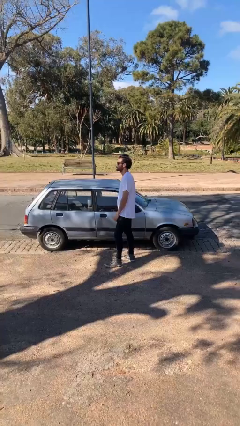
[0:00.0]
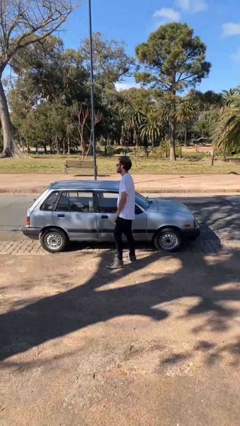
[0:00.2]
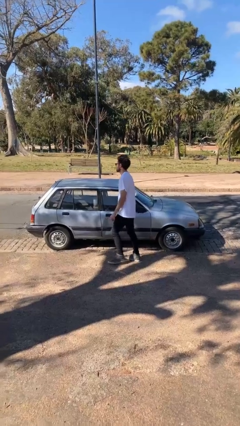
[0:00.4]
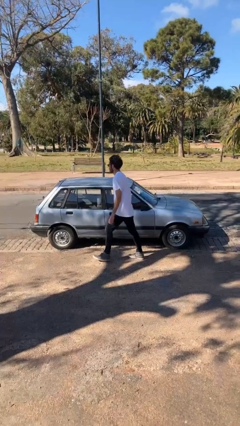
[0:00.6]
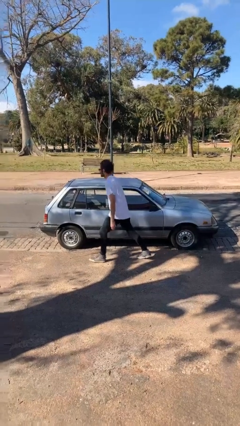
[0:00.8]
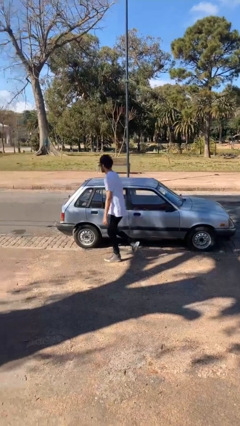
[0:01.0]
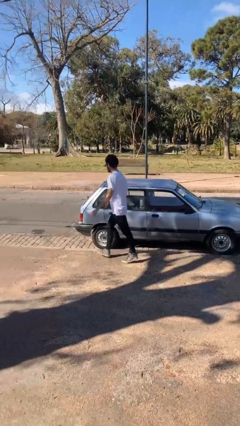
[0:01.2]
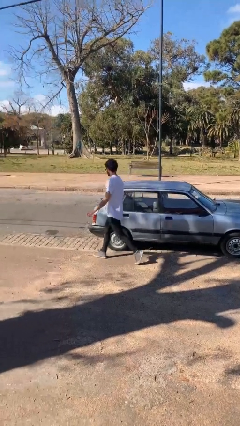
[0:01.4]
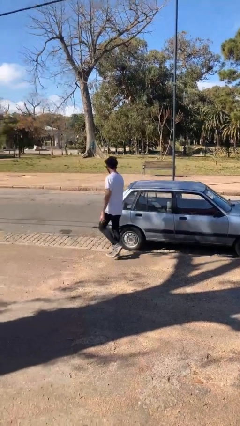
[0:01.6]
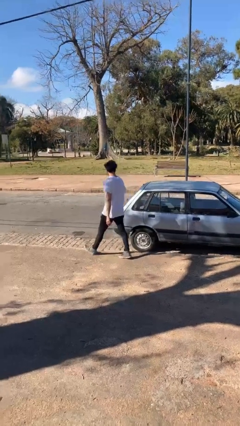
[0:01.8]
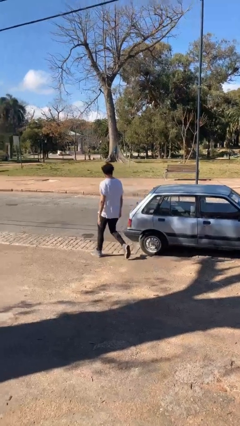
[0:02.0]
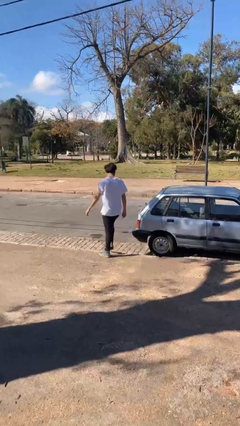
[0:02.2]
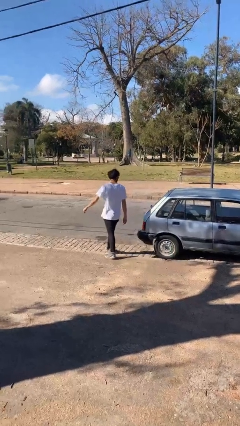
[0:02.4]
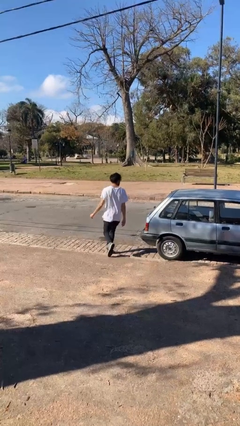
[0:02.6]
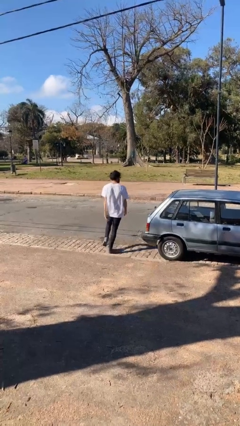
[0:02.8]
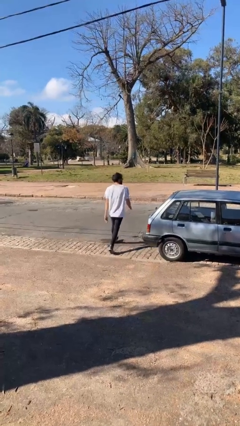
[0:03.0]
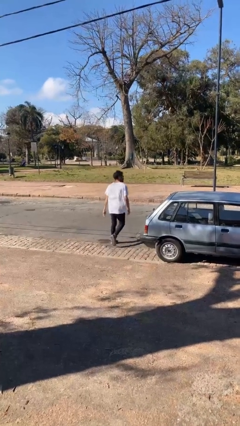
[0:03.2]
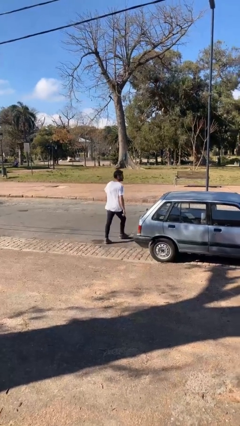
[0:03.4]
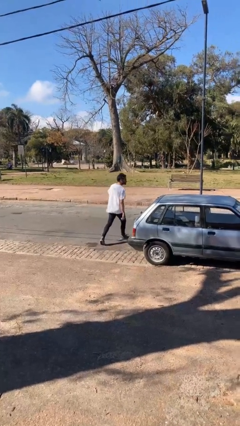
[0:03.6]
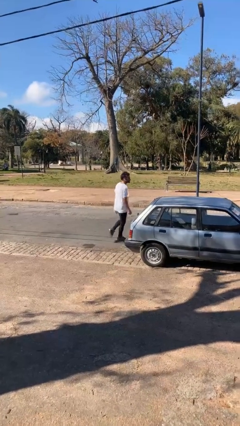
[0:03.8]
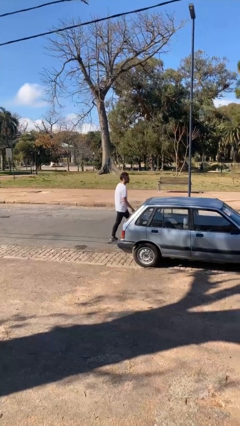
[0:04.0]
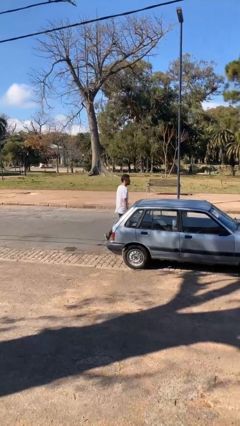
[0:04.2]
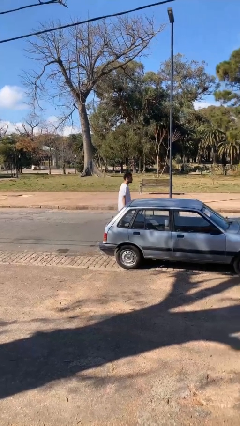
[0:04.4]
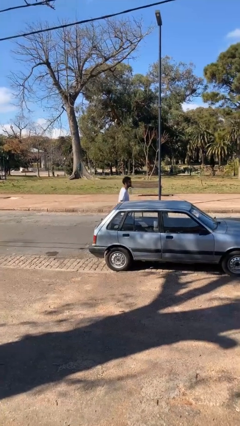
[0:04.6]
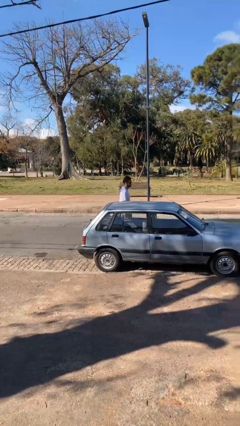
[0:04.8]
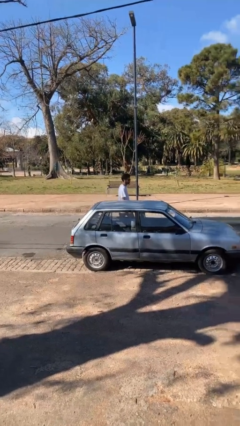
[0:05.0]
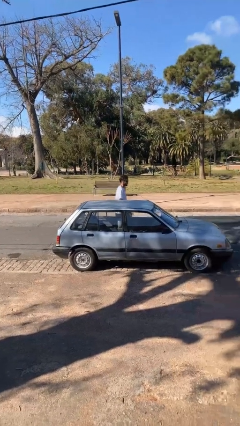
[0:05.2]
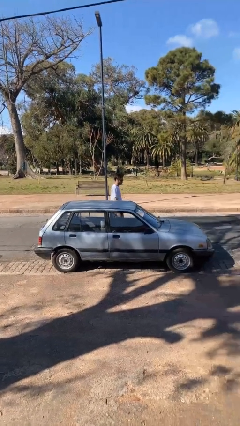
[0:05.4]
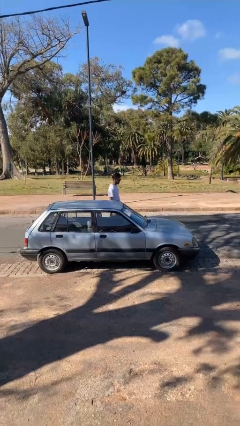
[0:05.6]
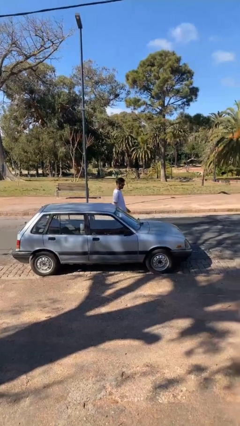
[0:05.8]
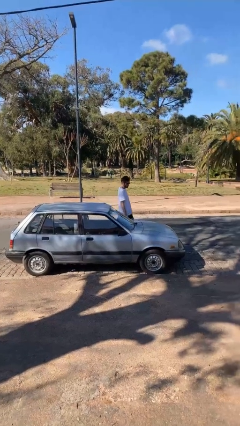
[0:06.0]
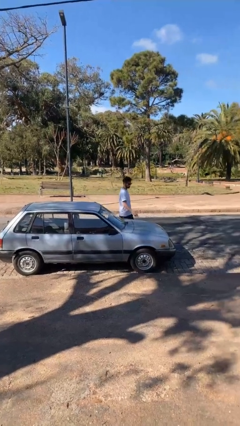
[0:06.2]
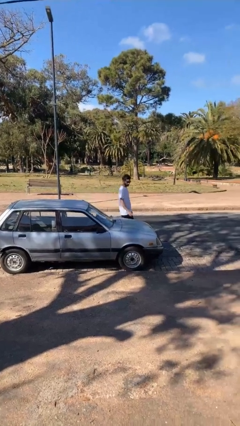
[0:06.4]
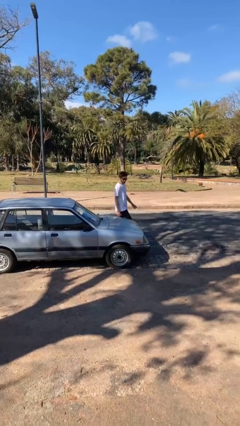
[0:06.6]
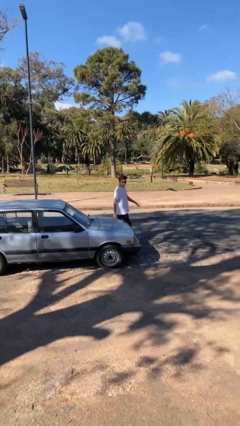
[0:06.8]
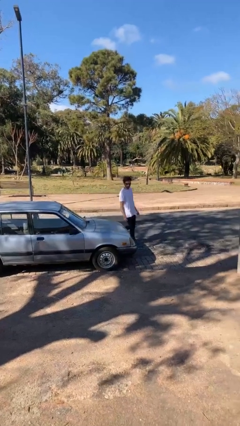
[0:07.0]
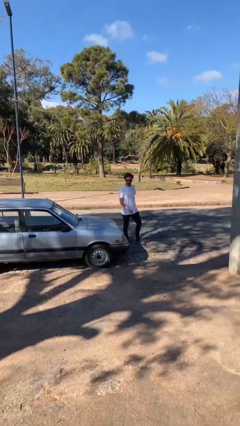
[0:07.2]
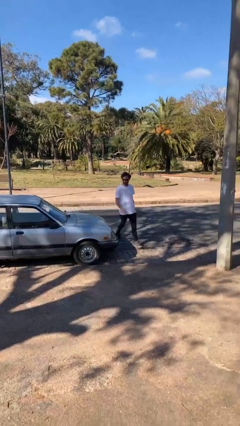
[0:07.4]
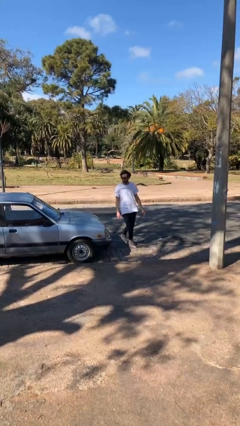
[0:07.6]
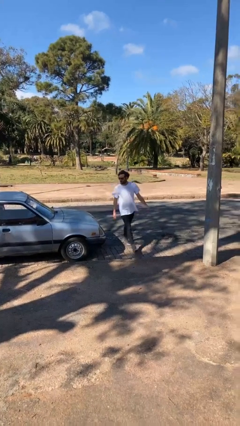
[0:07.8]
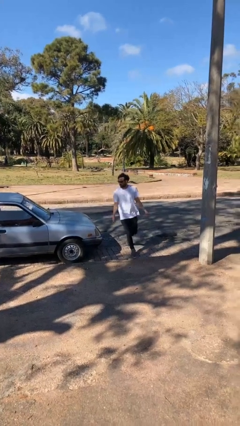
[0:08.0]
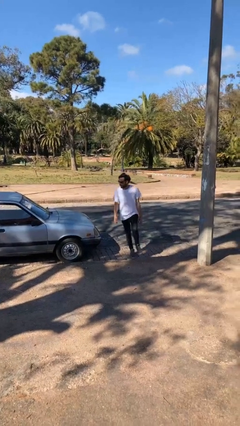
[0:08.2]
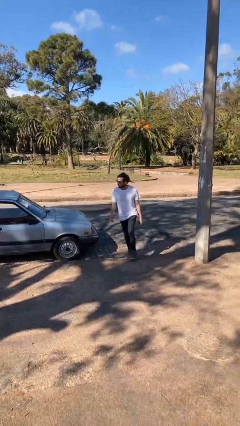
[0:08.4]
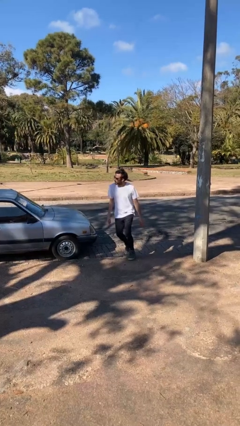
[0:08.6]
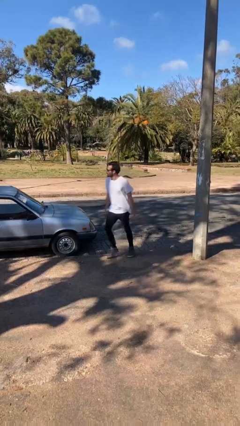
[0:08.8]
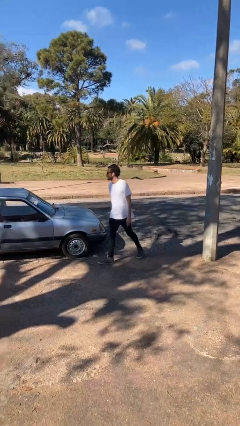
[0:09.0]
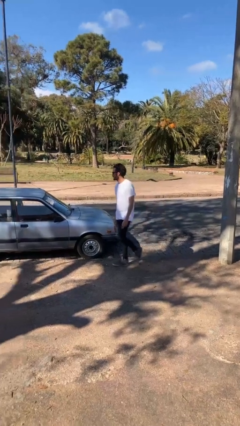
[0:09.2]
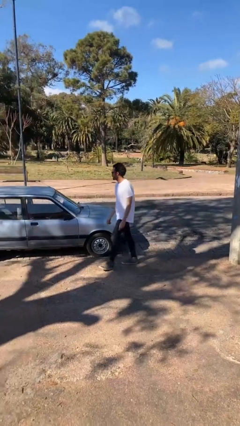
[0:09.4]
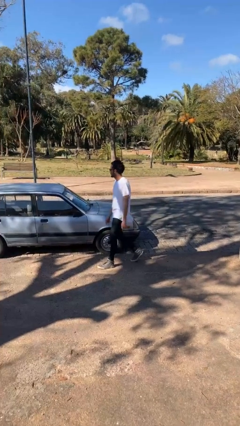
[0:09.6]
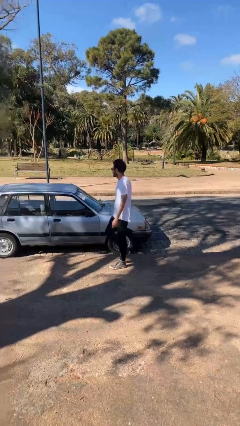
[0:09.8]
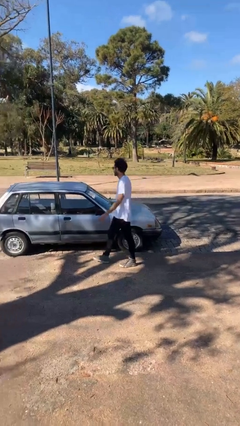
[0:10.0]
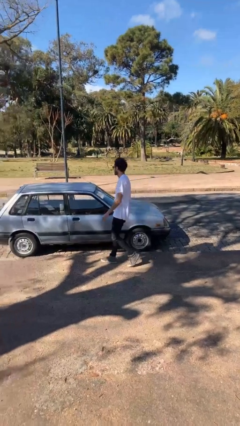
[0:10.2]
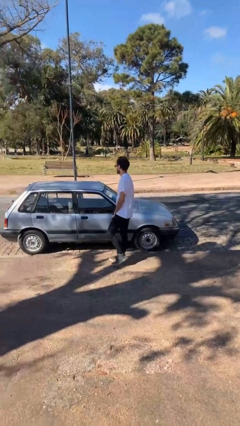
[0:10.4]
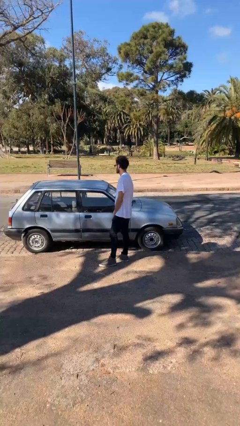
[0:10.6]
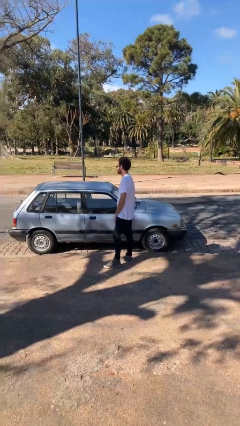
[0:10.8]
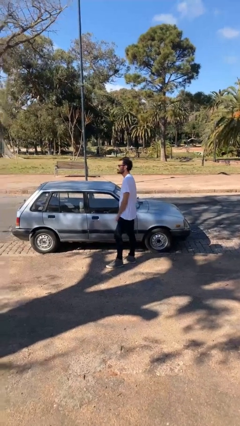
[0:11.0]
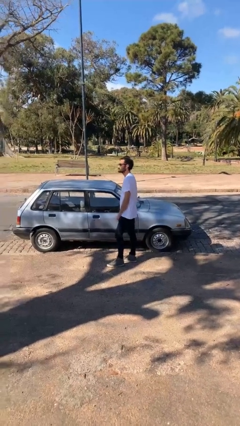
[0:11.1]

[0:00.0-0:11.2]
person walks around car

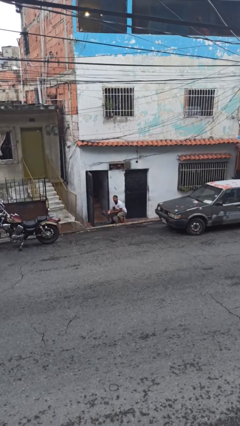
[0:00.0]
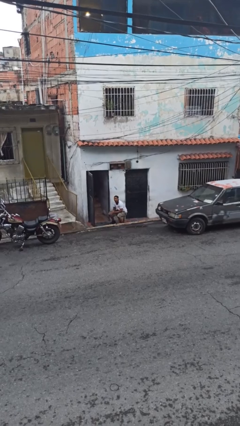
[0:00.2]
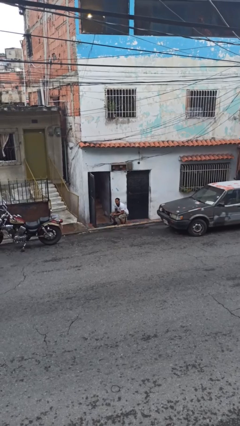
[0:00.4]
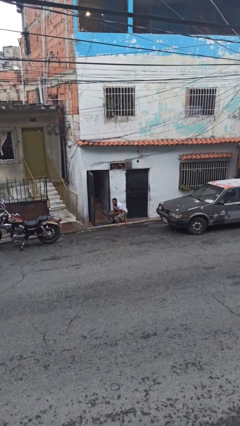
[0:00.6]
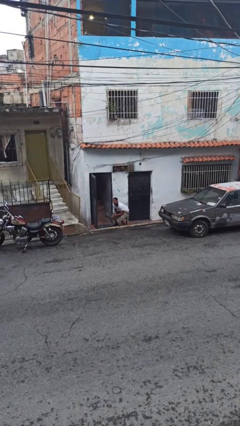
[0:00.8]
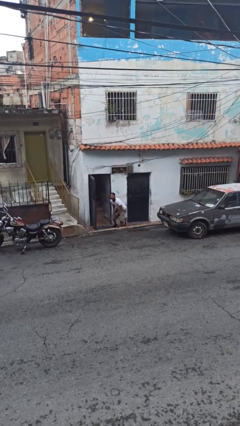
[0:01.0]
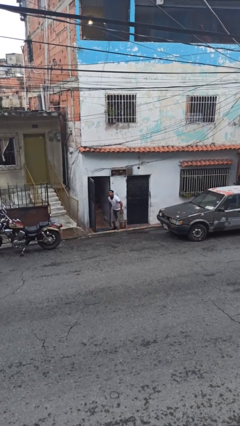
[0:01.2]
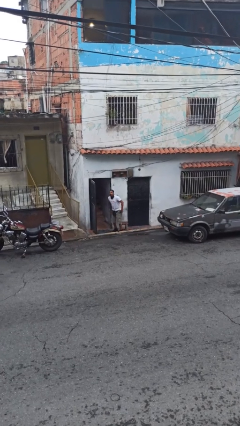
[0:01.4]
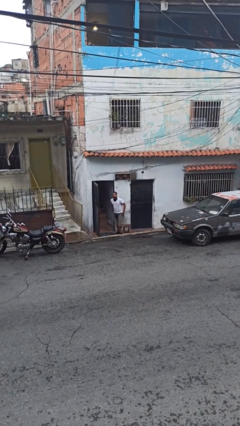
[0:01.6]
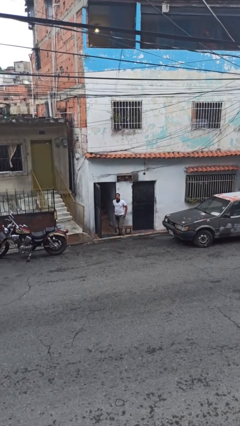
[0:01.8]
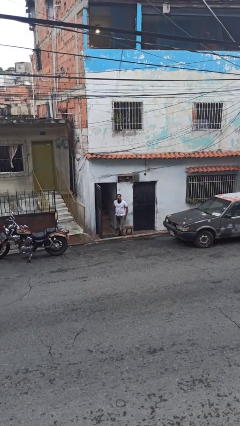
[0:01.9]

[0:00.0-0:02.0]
person stands up

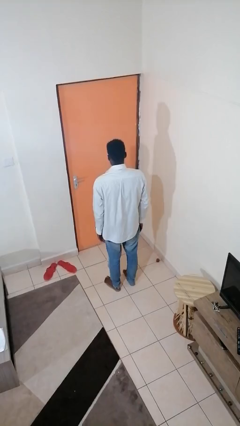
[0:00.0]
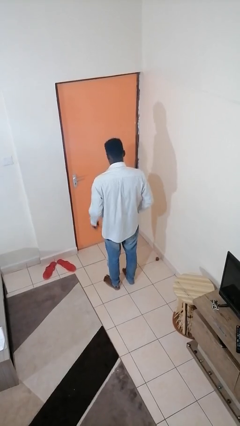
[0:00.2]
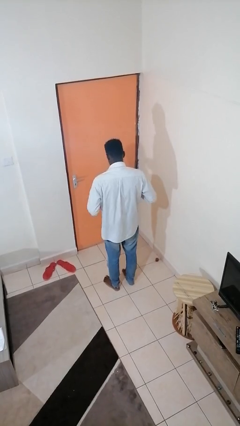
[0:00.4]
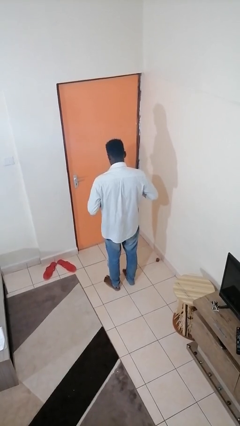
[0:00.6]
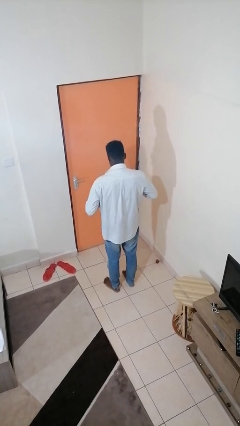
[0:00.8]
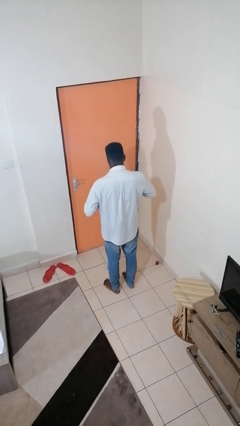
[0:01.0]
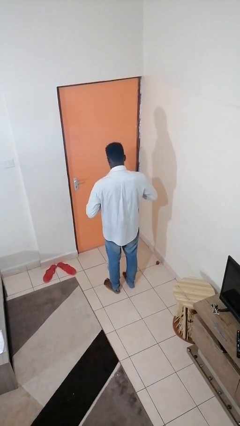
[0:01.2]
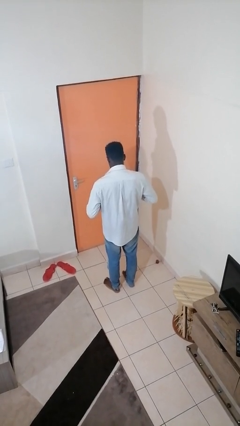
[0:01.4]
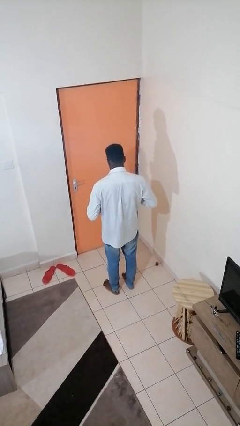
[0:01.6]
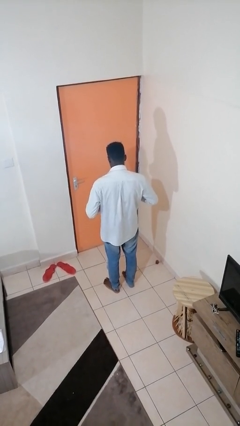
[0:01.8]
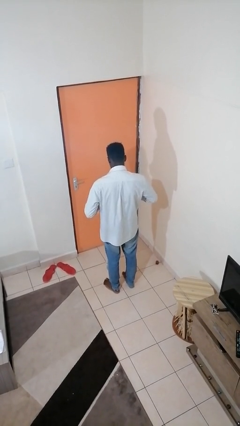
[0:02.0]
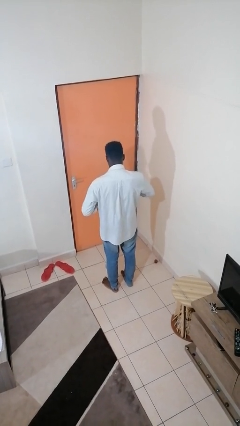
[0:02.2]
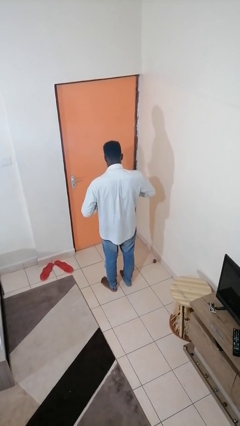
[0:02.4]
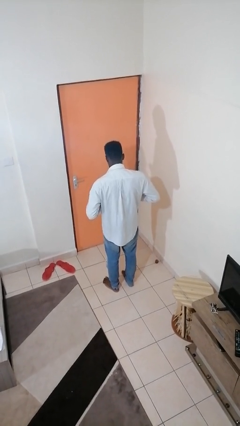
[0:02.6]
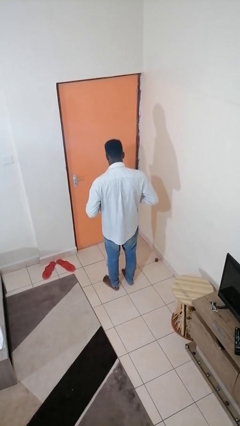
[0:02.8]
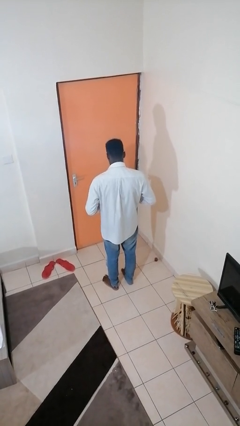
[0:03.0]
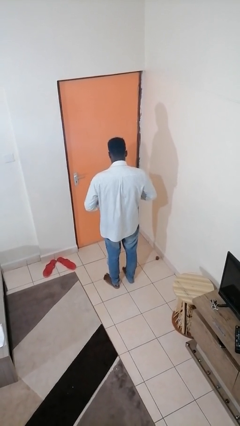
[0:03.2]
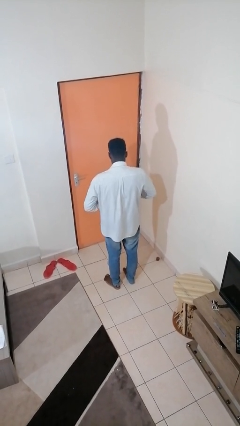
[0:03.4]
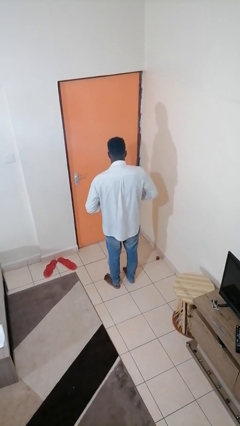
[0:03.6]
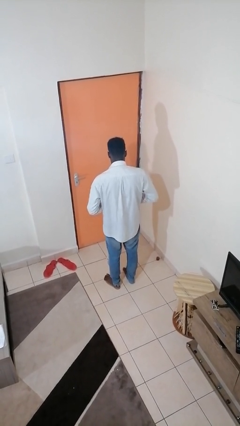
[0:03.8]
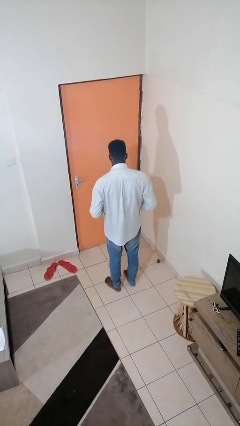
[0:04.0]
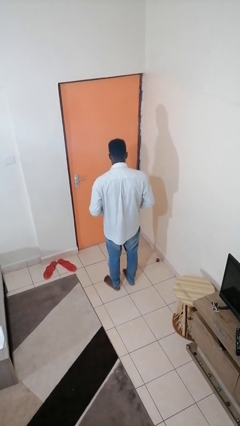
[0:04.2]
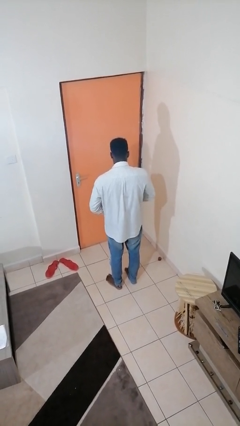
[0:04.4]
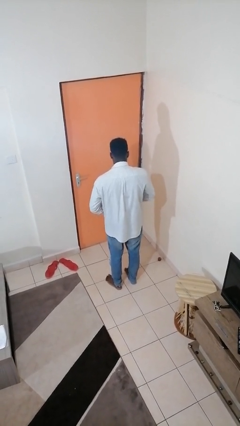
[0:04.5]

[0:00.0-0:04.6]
person unbuttons shirt

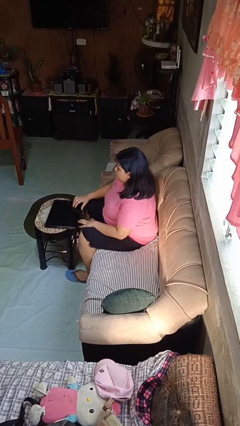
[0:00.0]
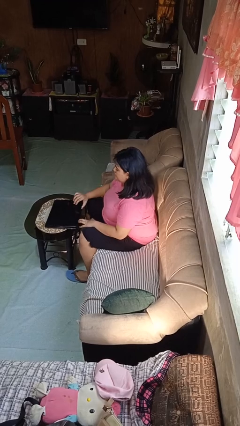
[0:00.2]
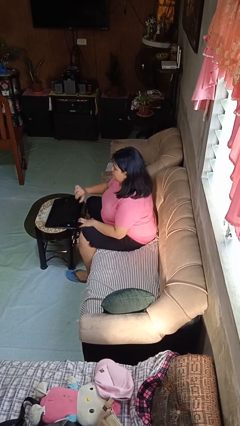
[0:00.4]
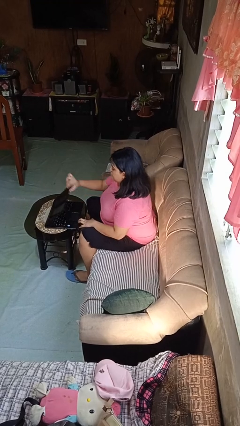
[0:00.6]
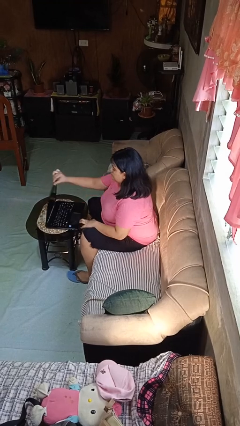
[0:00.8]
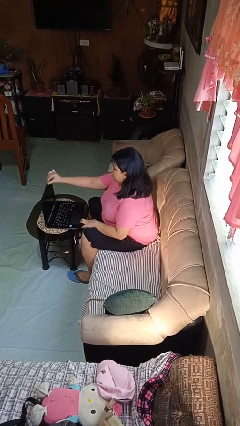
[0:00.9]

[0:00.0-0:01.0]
person opens laptop
